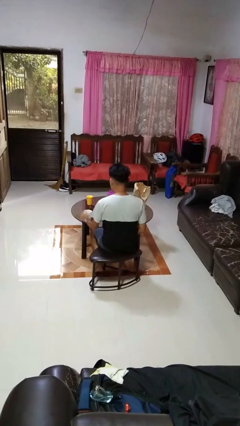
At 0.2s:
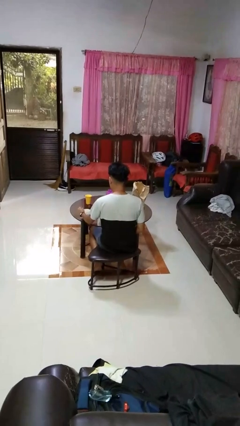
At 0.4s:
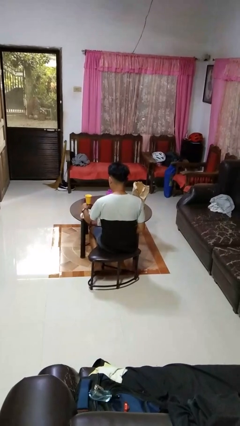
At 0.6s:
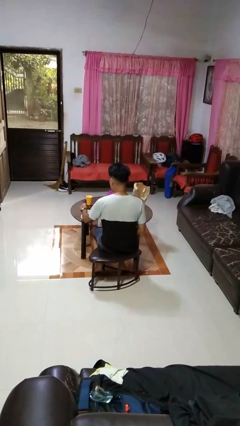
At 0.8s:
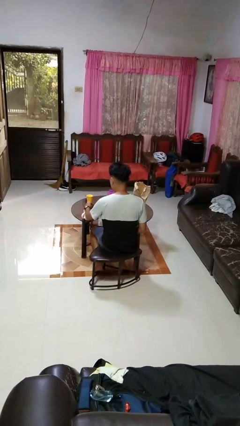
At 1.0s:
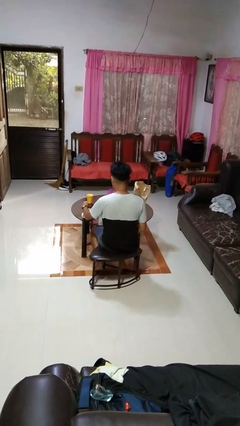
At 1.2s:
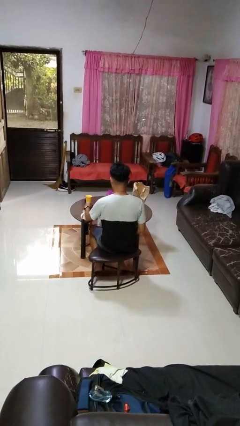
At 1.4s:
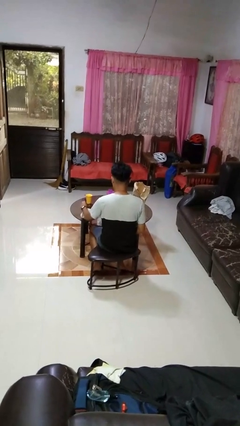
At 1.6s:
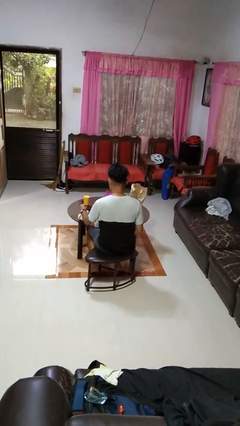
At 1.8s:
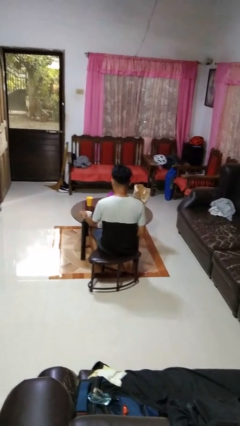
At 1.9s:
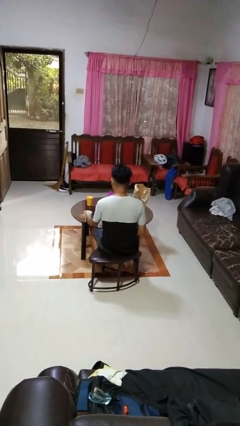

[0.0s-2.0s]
person stirs mug

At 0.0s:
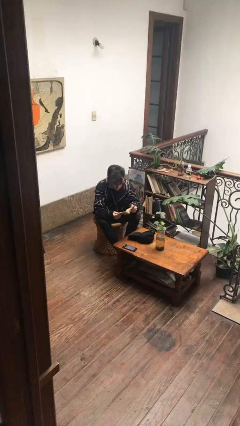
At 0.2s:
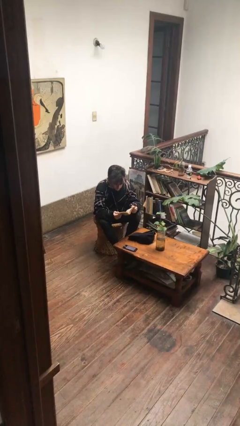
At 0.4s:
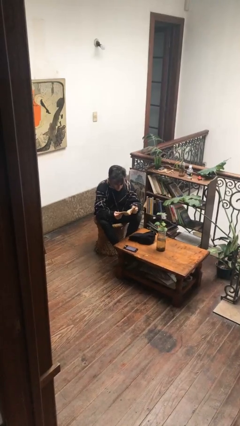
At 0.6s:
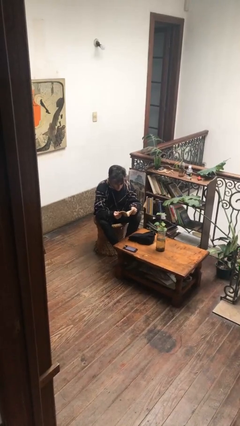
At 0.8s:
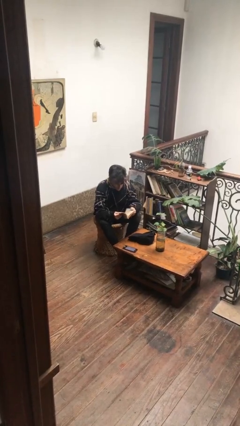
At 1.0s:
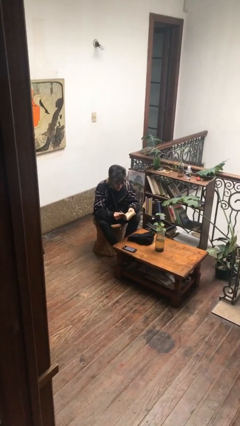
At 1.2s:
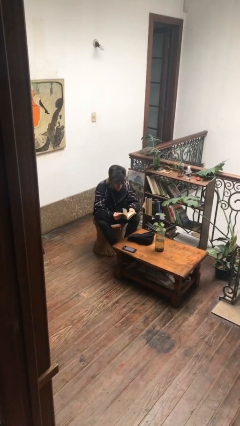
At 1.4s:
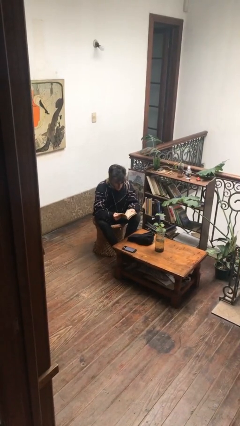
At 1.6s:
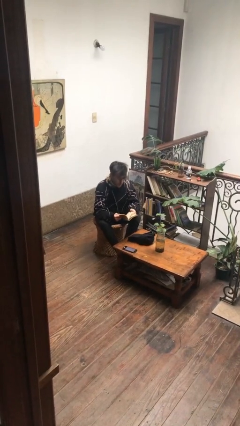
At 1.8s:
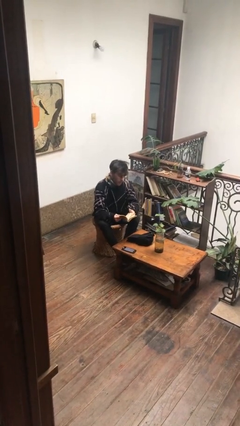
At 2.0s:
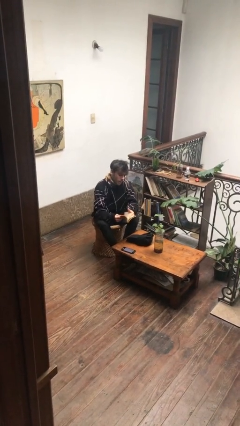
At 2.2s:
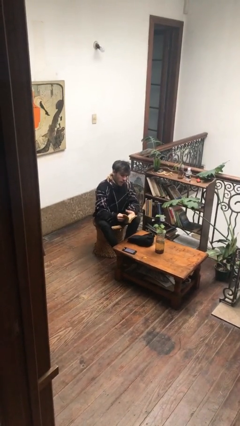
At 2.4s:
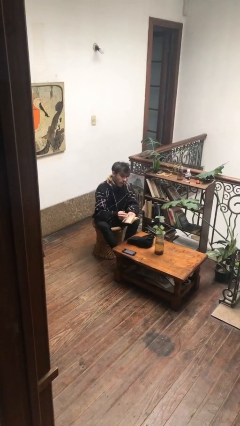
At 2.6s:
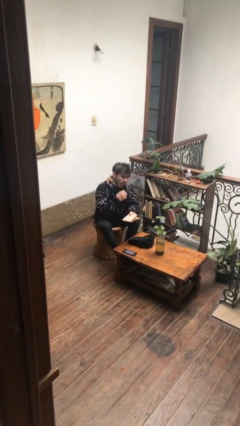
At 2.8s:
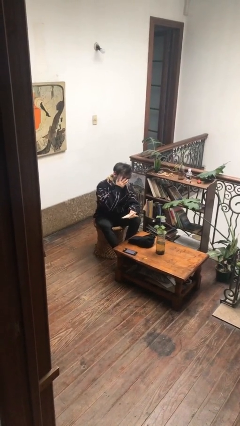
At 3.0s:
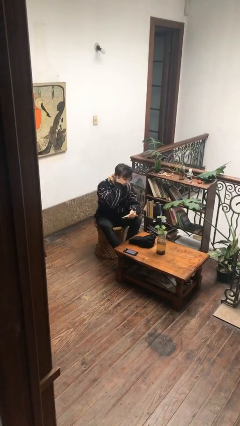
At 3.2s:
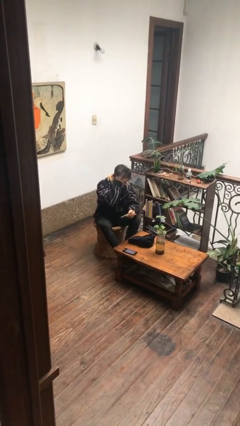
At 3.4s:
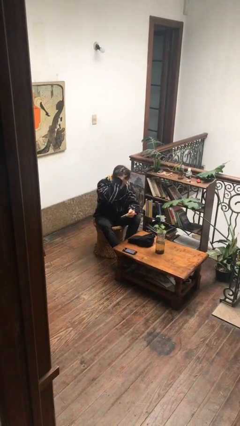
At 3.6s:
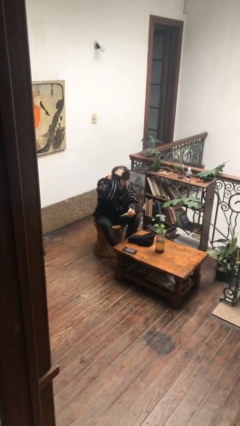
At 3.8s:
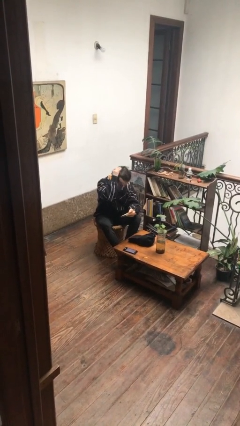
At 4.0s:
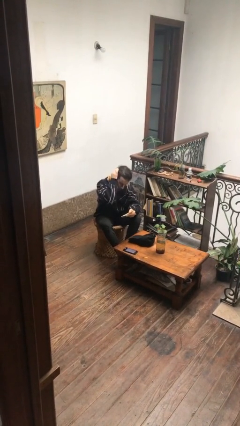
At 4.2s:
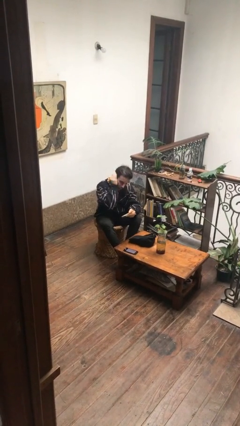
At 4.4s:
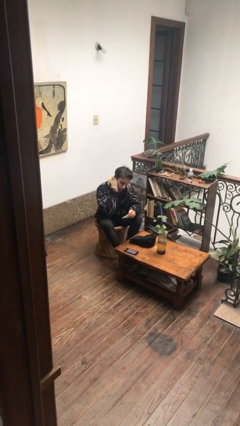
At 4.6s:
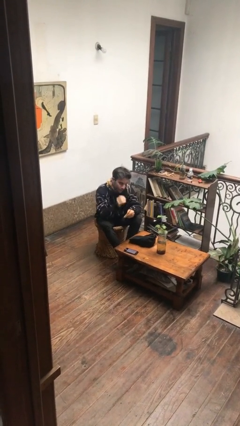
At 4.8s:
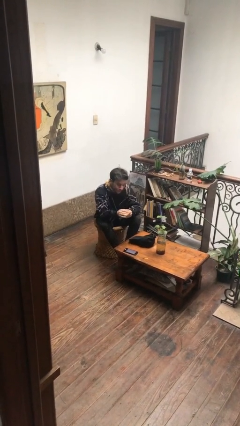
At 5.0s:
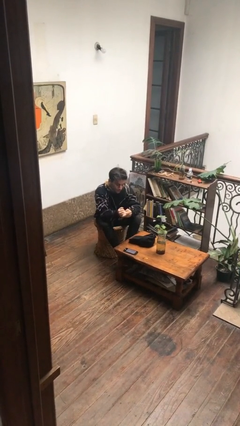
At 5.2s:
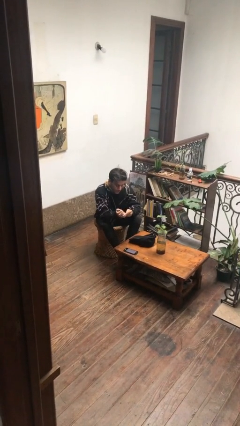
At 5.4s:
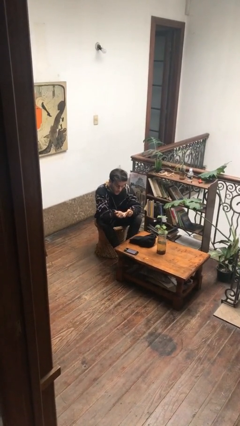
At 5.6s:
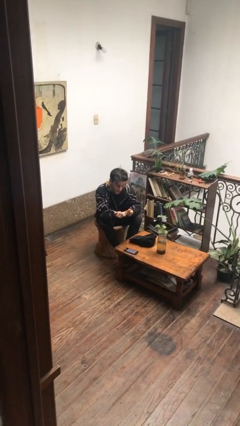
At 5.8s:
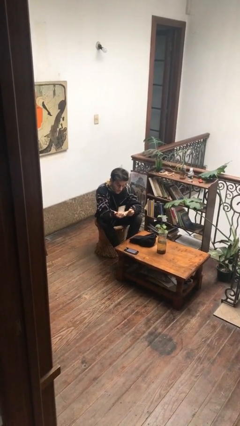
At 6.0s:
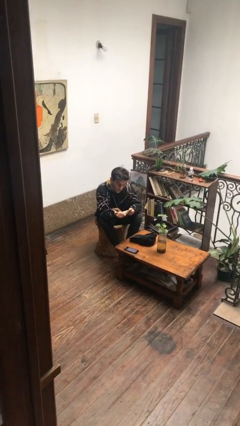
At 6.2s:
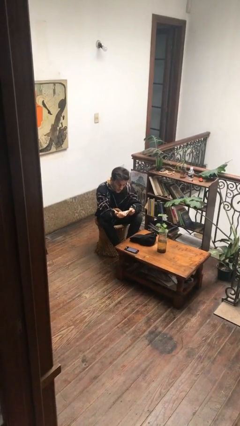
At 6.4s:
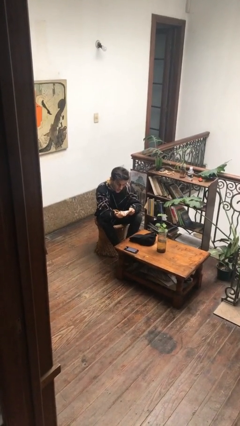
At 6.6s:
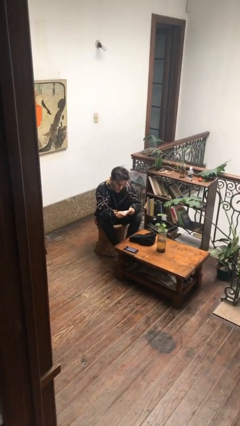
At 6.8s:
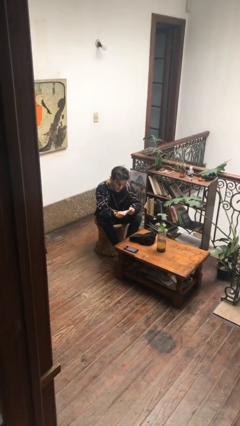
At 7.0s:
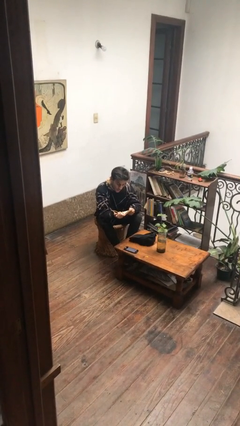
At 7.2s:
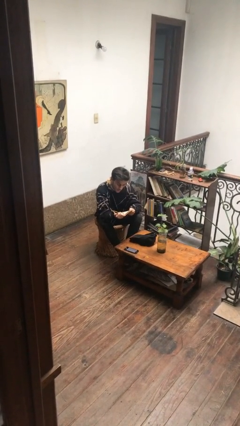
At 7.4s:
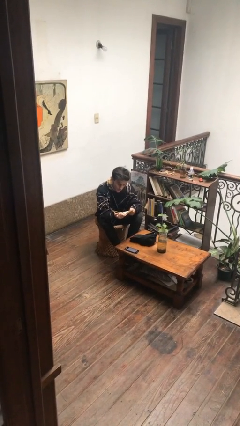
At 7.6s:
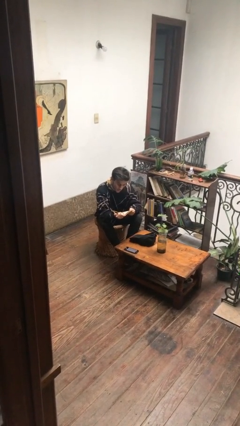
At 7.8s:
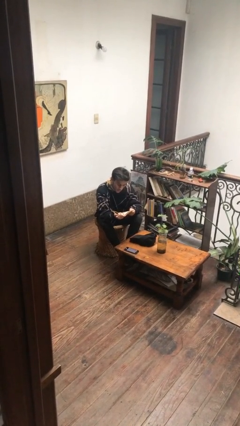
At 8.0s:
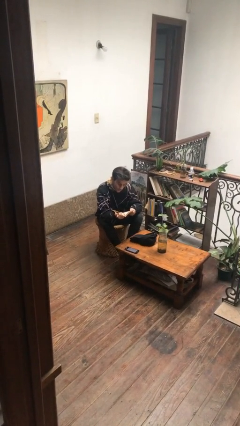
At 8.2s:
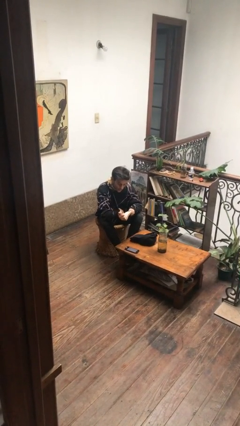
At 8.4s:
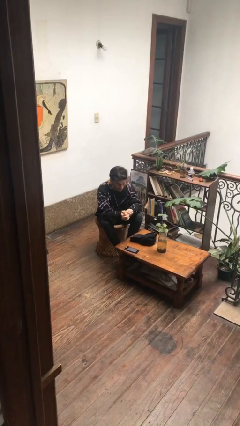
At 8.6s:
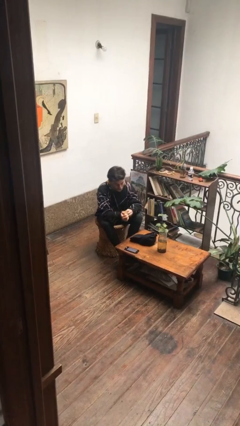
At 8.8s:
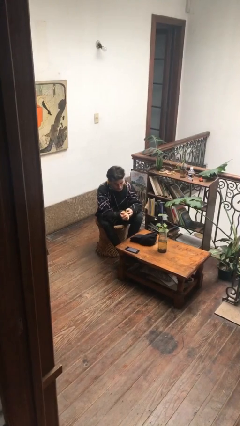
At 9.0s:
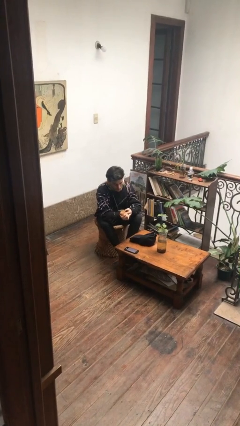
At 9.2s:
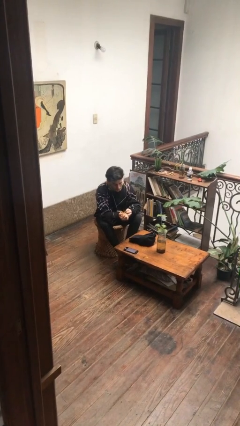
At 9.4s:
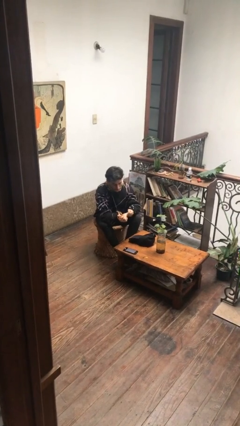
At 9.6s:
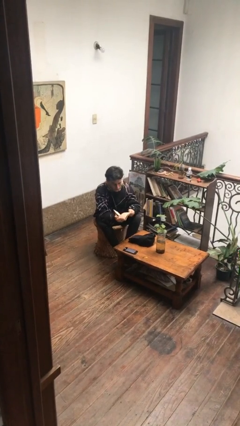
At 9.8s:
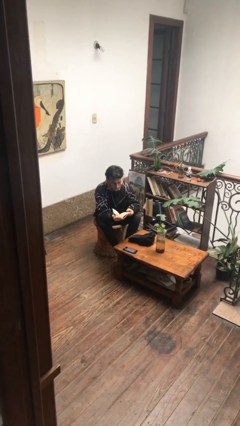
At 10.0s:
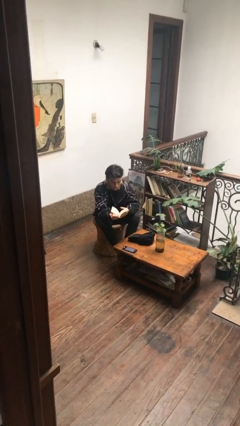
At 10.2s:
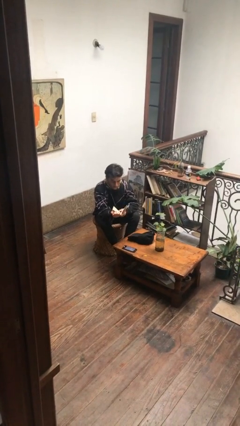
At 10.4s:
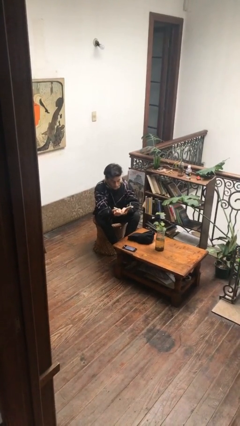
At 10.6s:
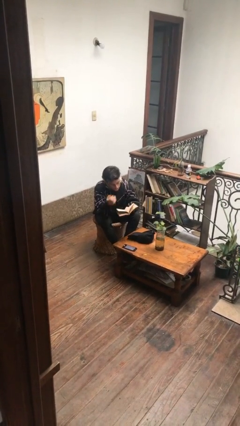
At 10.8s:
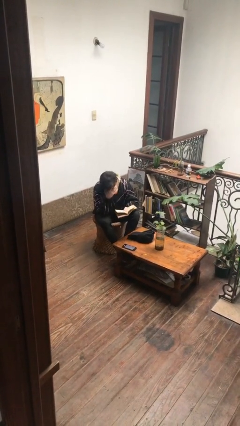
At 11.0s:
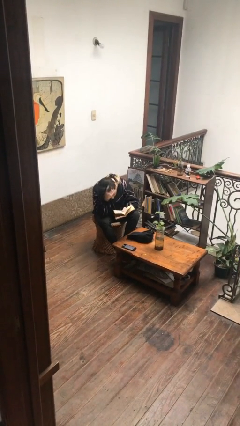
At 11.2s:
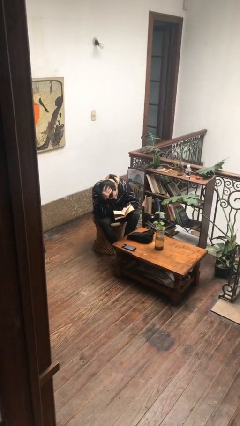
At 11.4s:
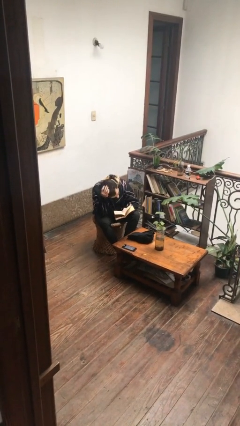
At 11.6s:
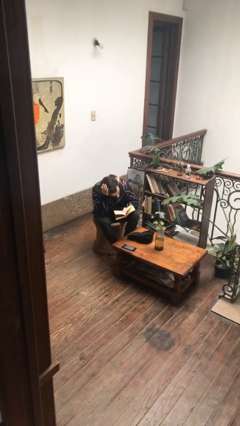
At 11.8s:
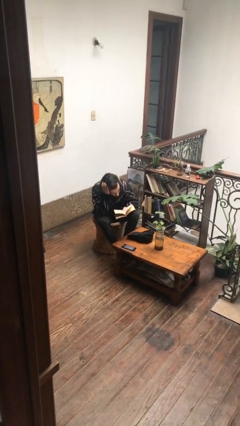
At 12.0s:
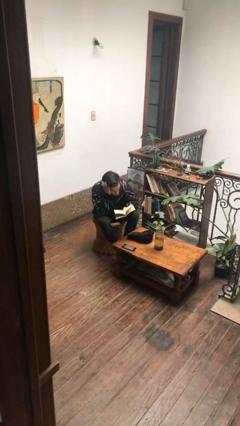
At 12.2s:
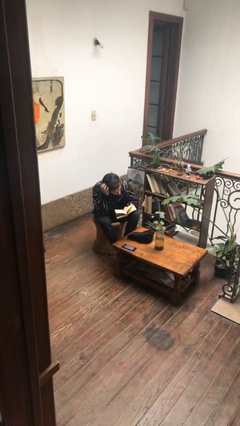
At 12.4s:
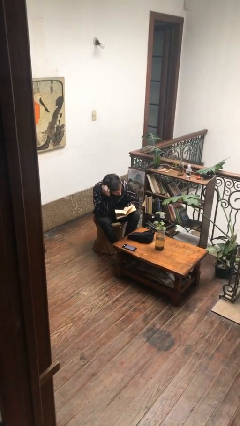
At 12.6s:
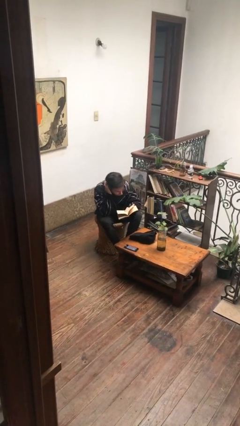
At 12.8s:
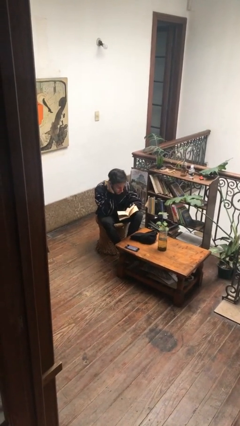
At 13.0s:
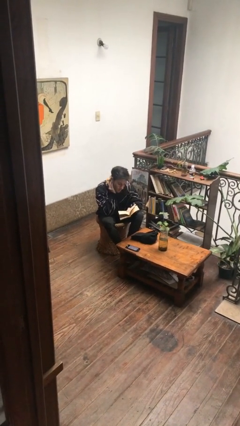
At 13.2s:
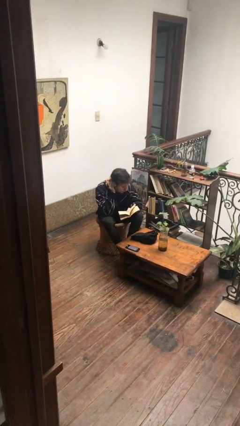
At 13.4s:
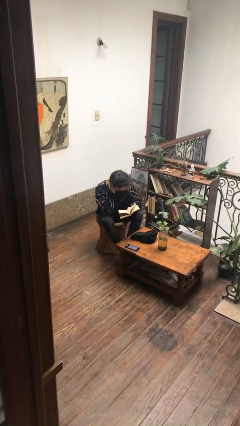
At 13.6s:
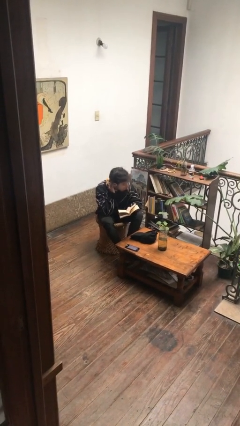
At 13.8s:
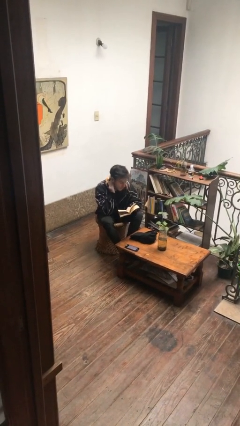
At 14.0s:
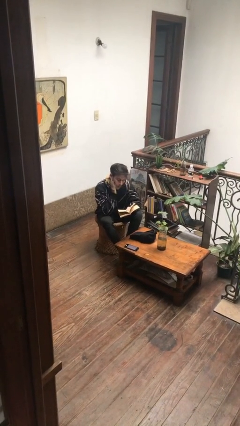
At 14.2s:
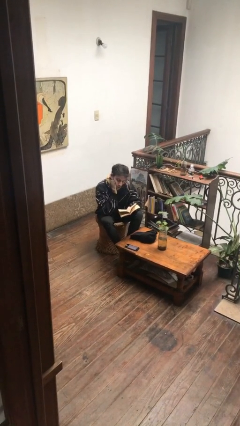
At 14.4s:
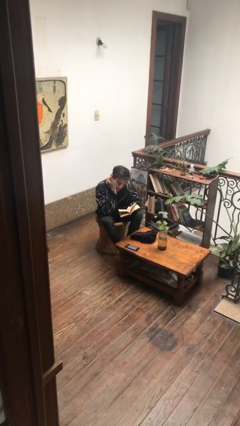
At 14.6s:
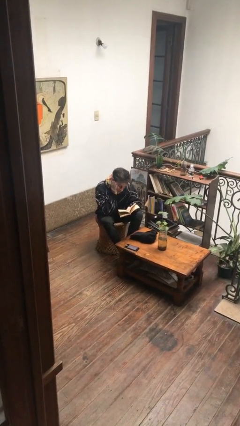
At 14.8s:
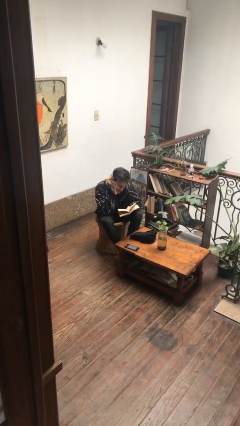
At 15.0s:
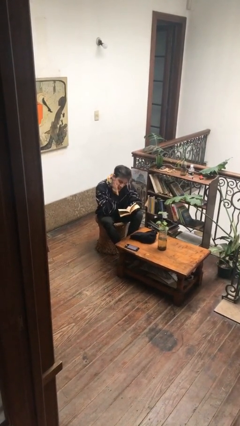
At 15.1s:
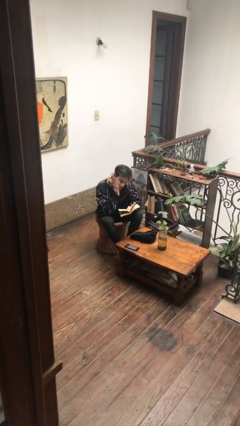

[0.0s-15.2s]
person reads document

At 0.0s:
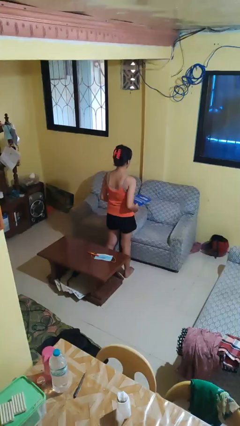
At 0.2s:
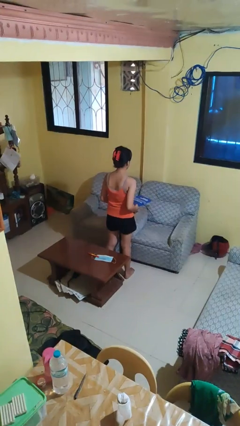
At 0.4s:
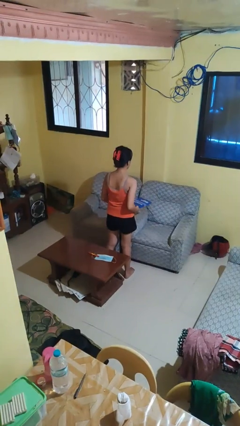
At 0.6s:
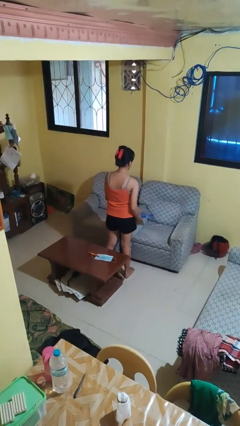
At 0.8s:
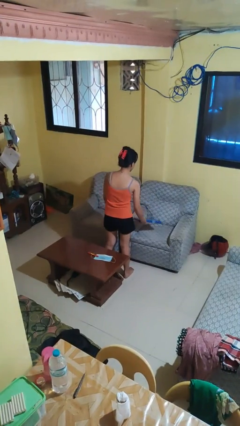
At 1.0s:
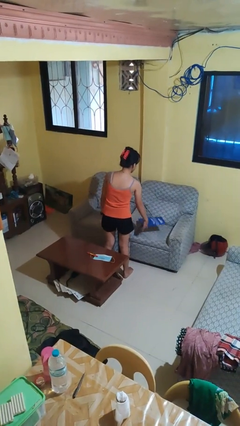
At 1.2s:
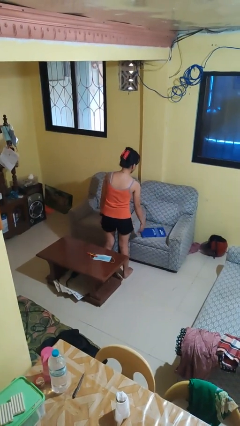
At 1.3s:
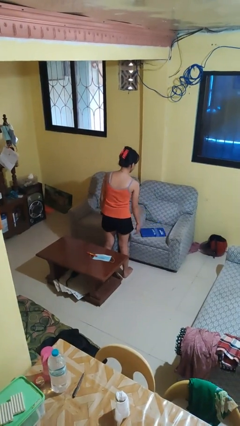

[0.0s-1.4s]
person puts down object on couch
